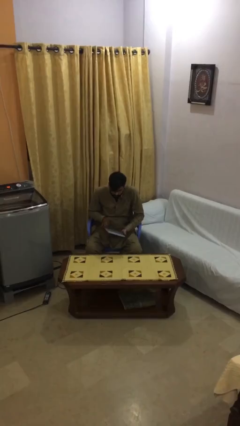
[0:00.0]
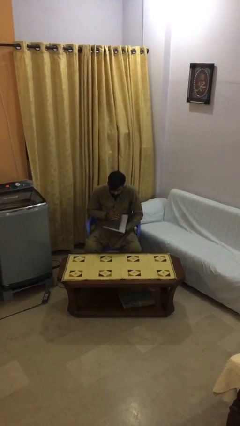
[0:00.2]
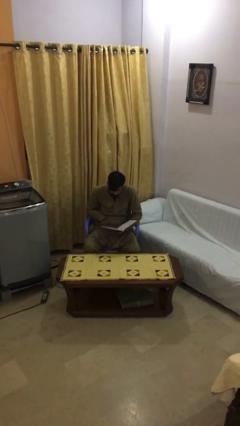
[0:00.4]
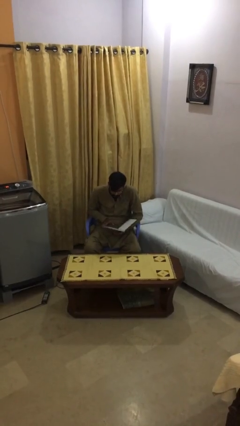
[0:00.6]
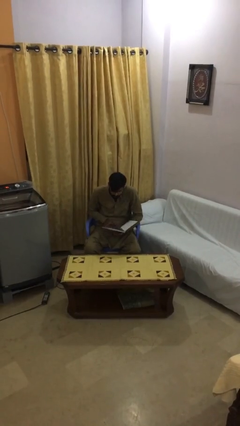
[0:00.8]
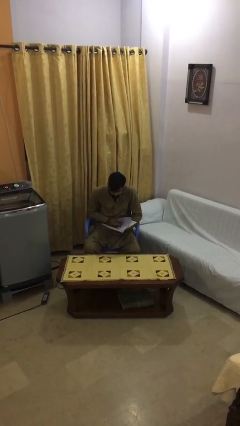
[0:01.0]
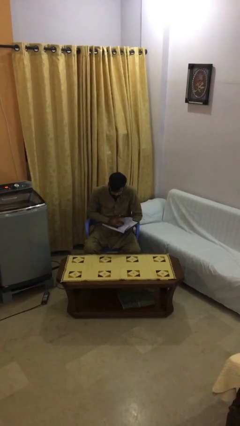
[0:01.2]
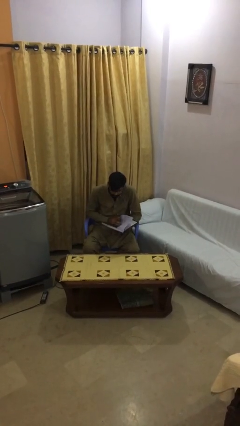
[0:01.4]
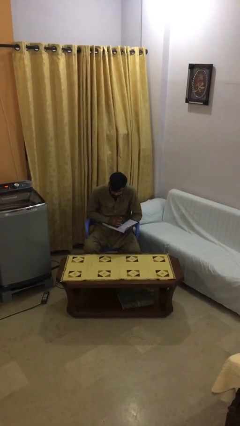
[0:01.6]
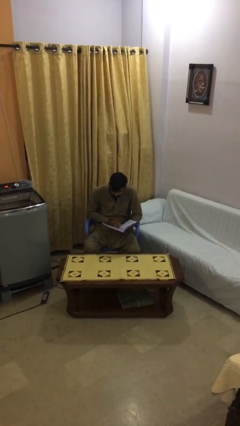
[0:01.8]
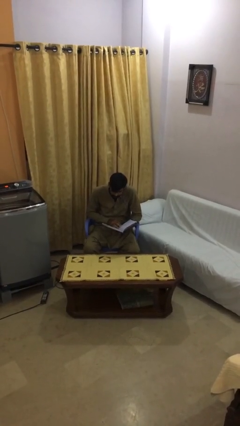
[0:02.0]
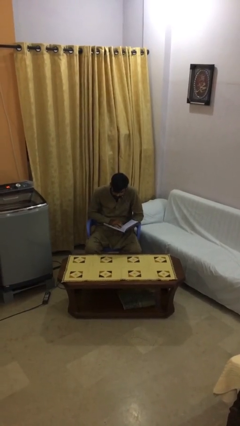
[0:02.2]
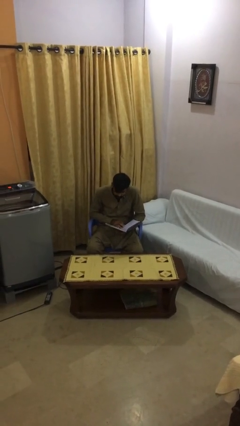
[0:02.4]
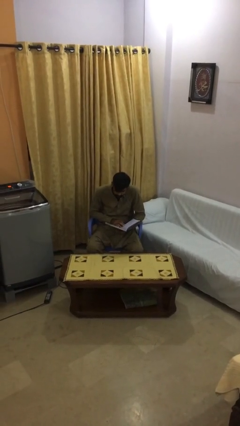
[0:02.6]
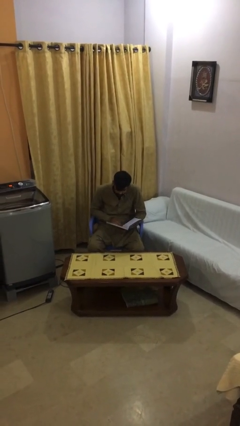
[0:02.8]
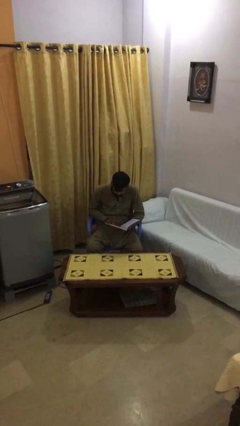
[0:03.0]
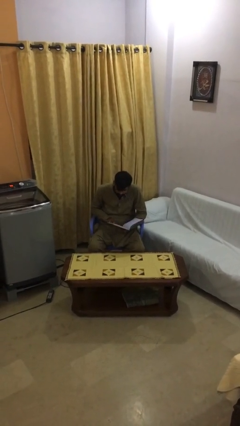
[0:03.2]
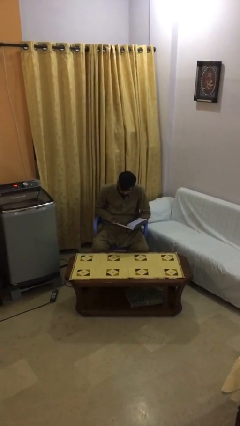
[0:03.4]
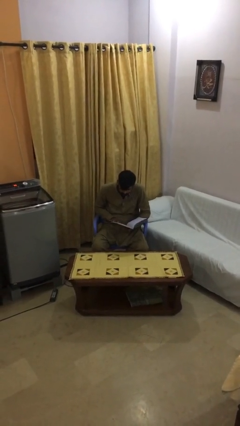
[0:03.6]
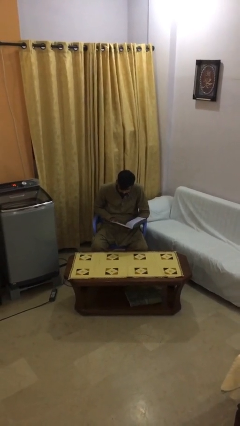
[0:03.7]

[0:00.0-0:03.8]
person reads document

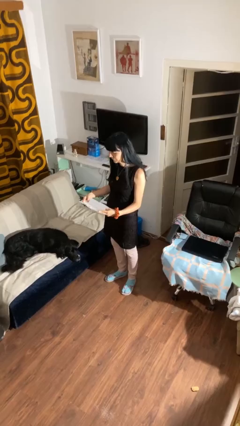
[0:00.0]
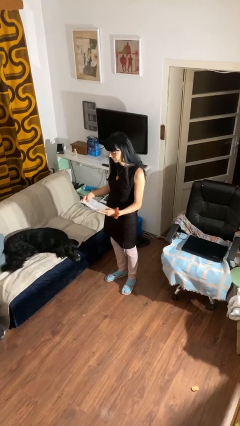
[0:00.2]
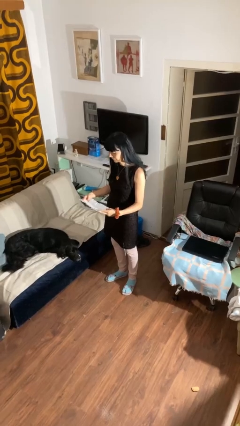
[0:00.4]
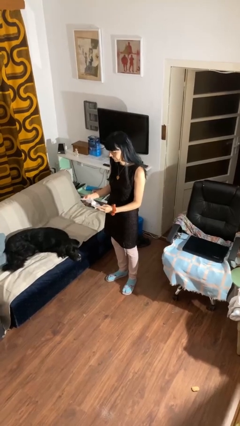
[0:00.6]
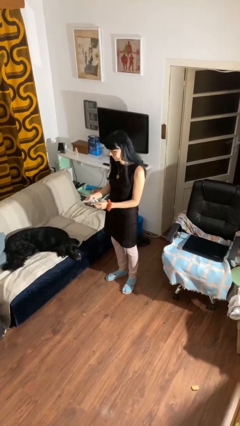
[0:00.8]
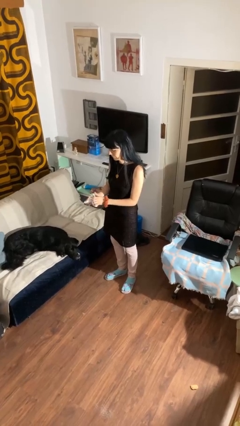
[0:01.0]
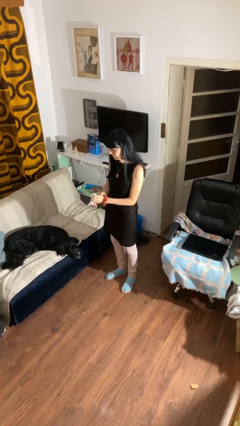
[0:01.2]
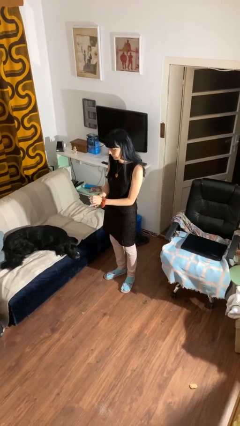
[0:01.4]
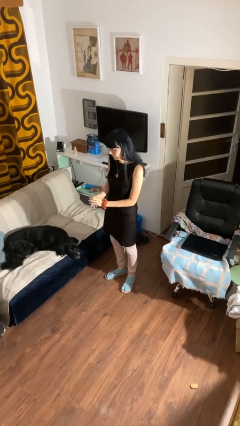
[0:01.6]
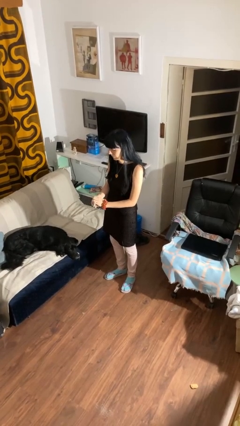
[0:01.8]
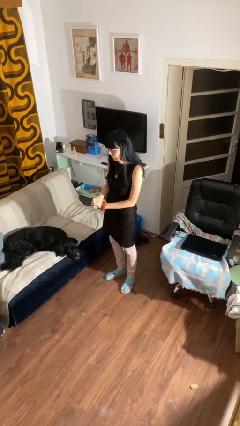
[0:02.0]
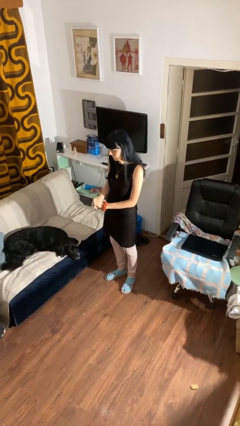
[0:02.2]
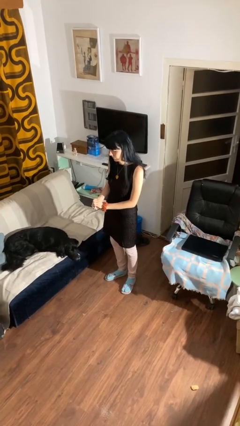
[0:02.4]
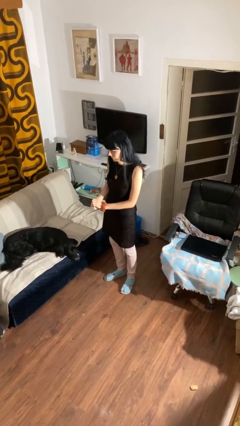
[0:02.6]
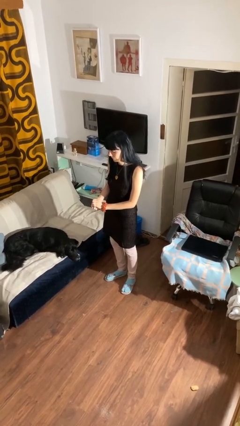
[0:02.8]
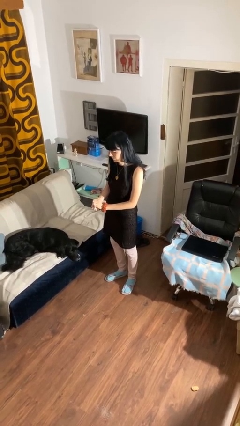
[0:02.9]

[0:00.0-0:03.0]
person crumples paper

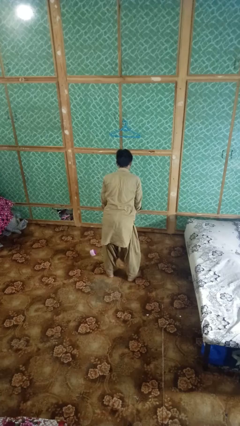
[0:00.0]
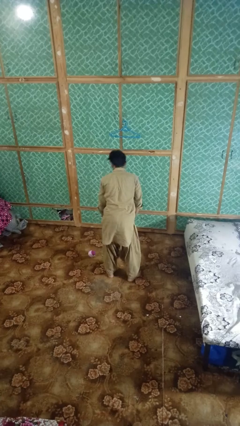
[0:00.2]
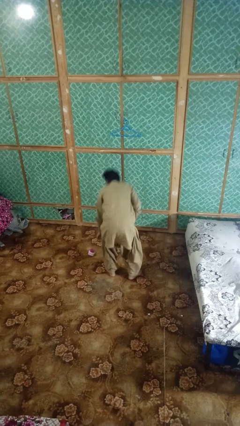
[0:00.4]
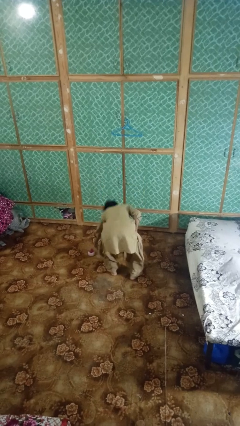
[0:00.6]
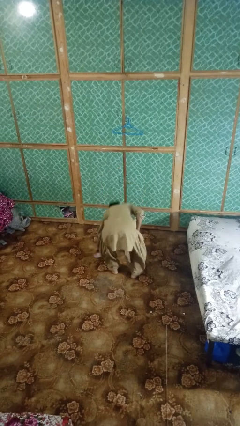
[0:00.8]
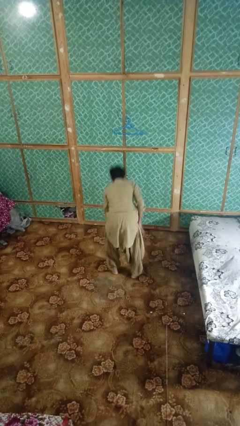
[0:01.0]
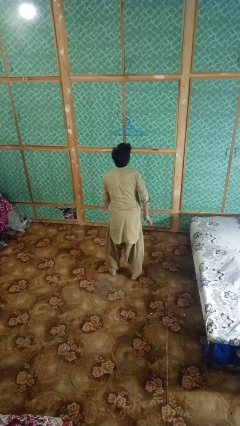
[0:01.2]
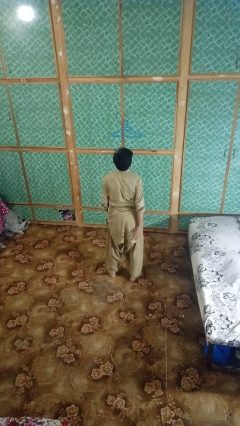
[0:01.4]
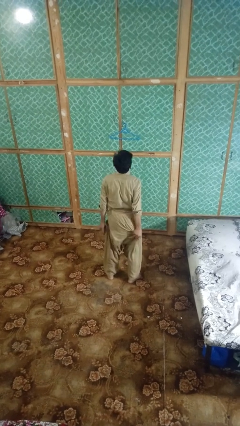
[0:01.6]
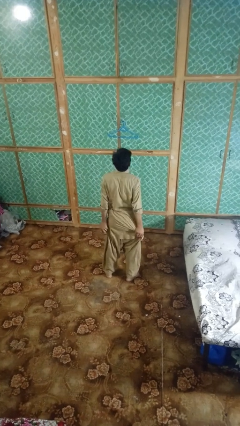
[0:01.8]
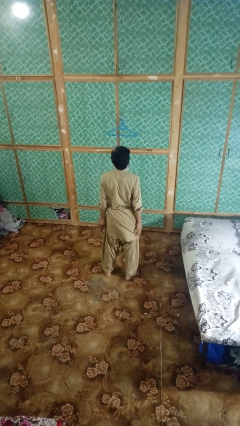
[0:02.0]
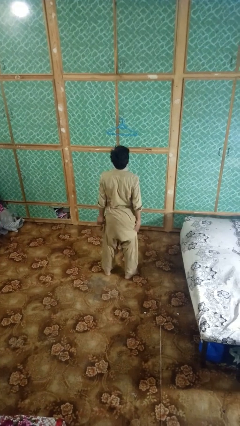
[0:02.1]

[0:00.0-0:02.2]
person picks up object from floor

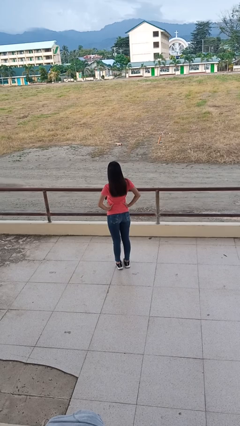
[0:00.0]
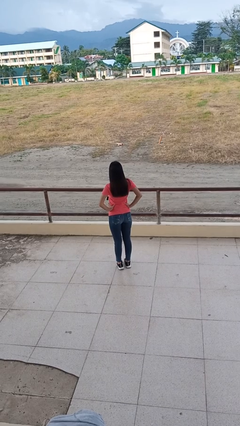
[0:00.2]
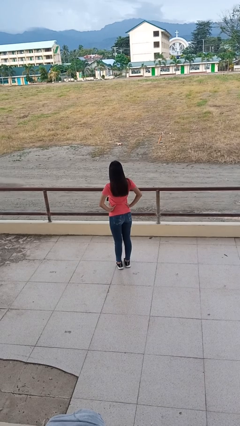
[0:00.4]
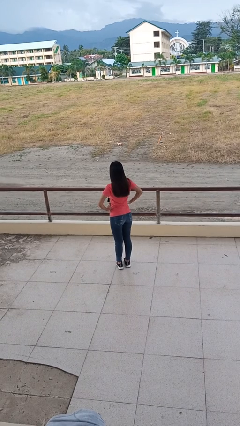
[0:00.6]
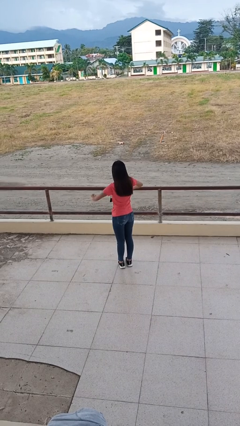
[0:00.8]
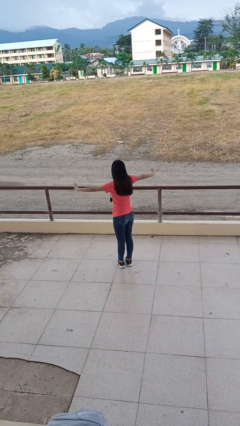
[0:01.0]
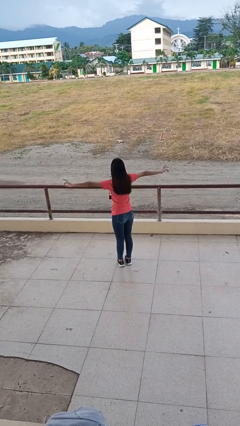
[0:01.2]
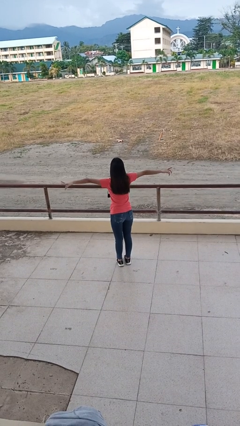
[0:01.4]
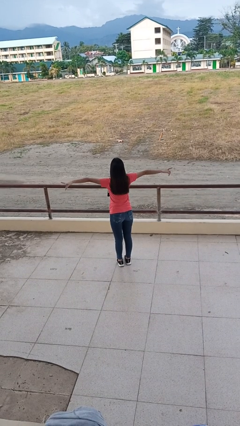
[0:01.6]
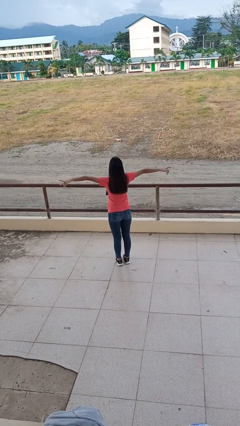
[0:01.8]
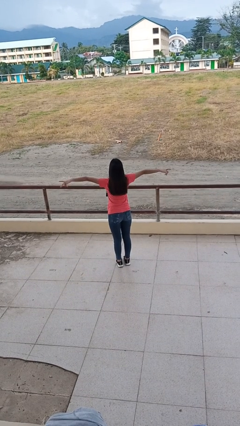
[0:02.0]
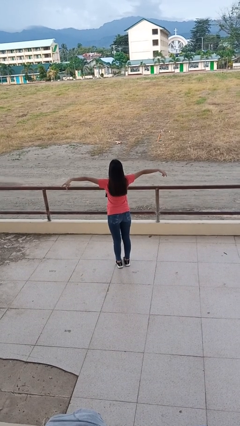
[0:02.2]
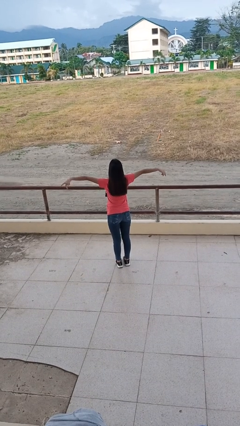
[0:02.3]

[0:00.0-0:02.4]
person stretches arms to side

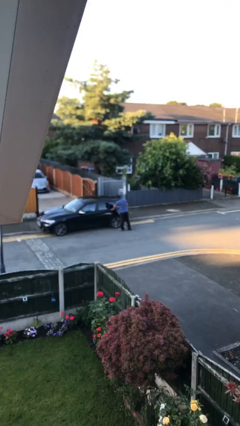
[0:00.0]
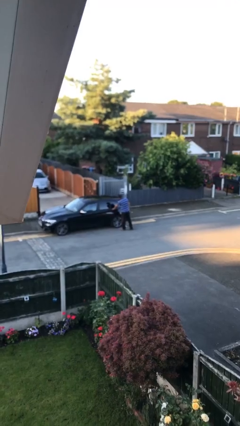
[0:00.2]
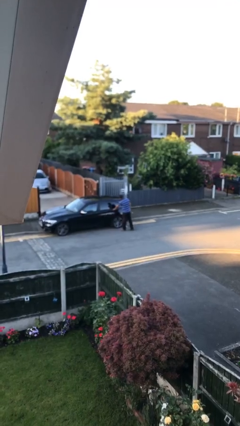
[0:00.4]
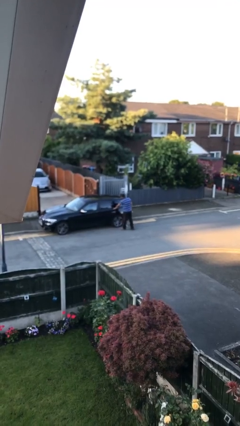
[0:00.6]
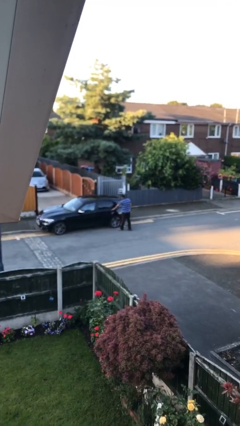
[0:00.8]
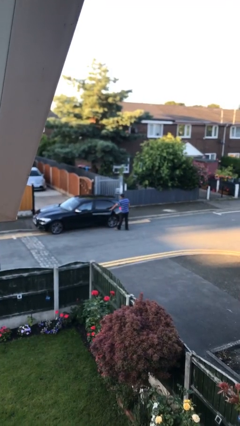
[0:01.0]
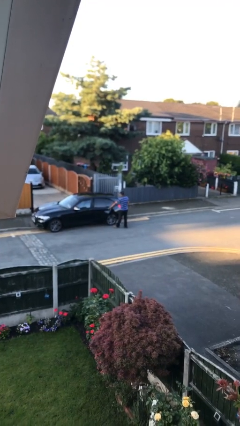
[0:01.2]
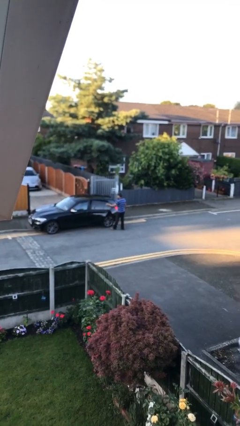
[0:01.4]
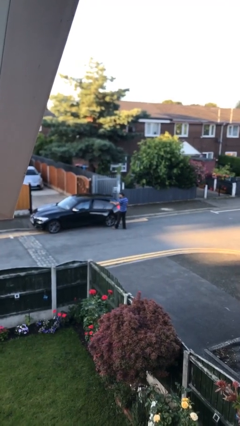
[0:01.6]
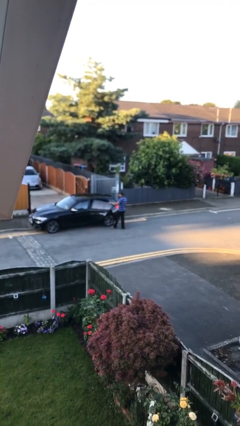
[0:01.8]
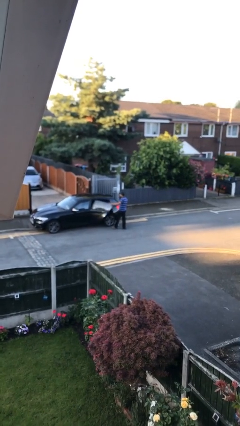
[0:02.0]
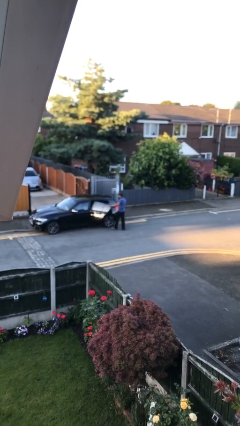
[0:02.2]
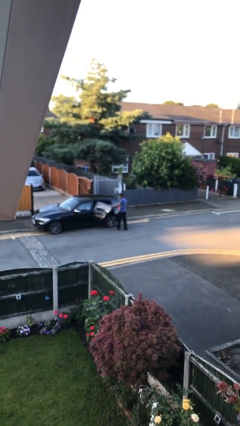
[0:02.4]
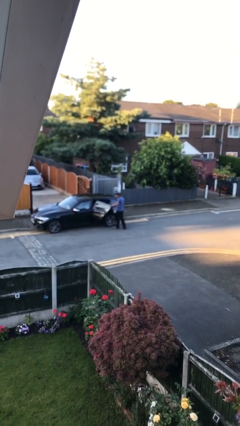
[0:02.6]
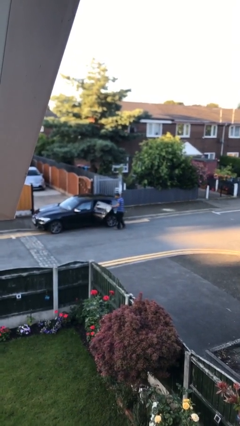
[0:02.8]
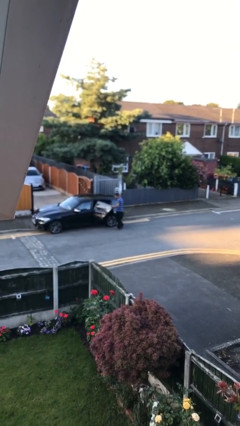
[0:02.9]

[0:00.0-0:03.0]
person opens car door

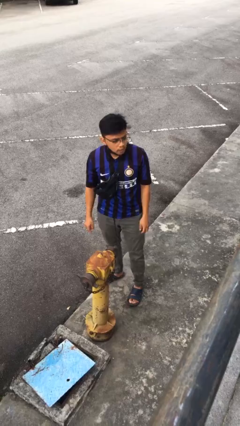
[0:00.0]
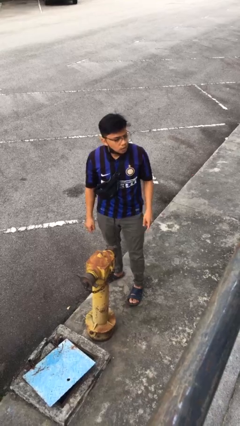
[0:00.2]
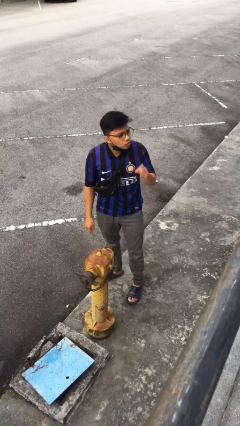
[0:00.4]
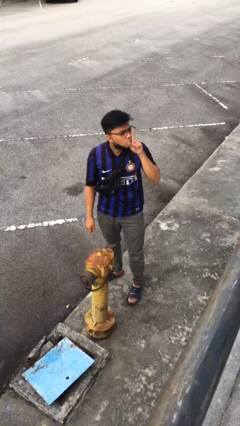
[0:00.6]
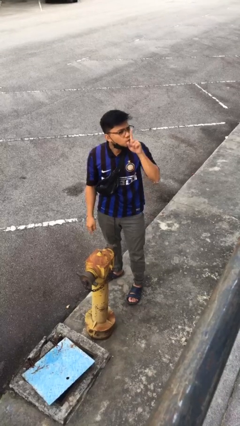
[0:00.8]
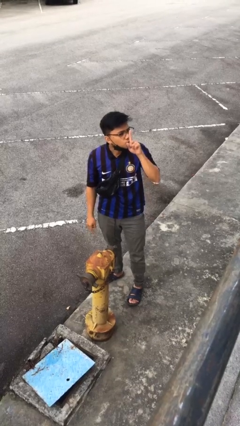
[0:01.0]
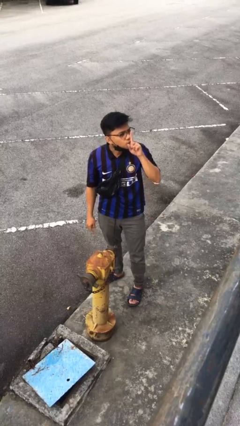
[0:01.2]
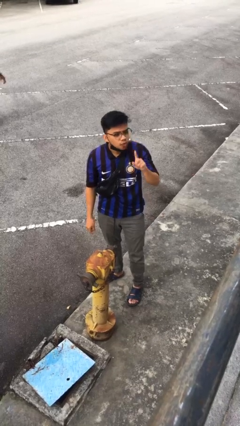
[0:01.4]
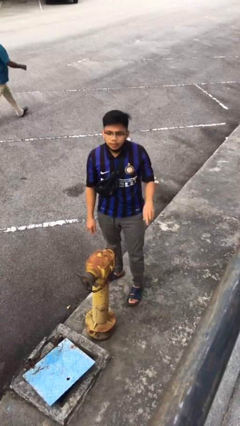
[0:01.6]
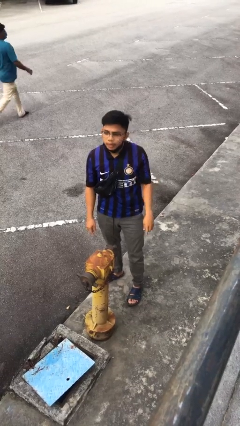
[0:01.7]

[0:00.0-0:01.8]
person gestures be quiet

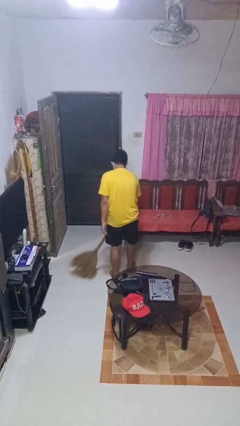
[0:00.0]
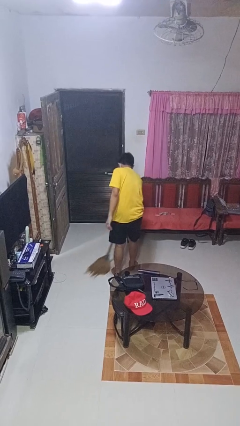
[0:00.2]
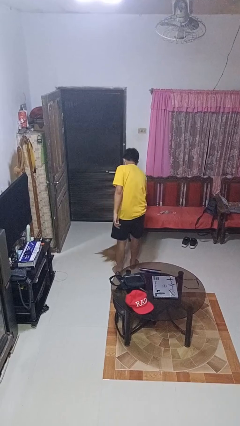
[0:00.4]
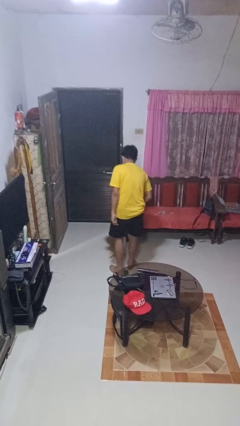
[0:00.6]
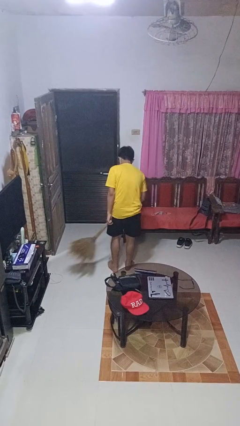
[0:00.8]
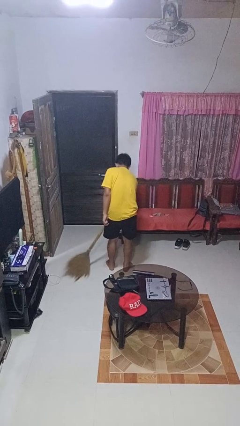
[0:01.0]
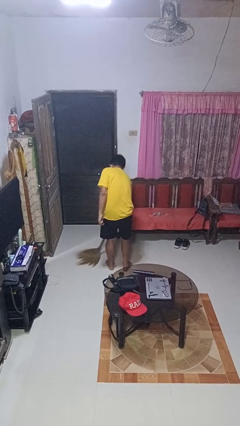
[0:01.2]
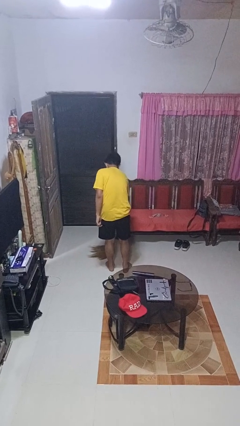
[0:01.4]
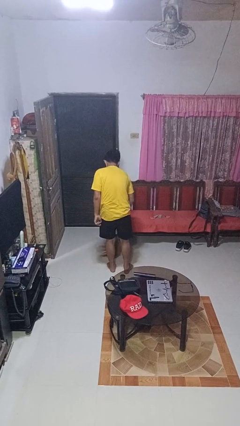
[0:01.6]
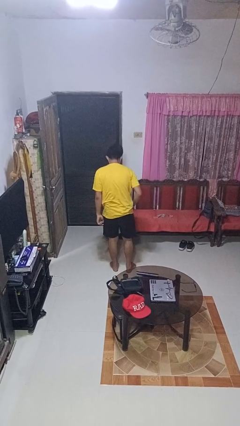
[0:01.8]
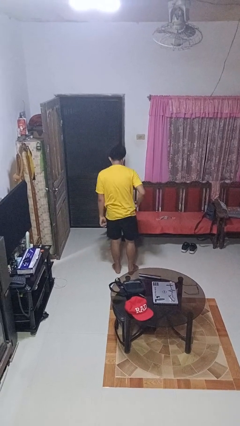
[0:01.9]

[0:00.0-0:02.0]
person sweeps floor
